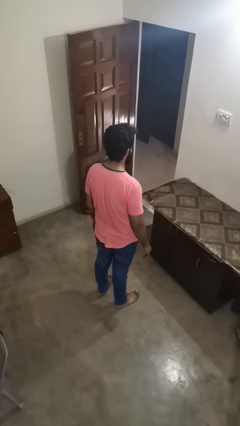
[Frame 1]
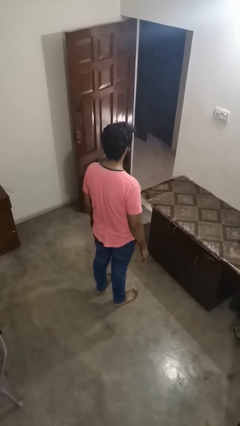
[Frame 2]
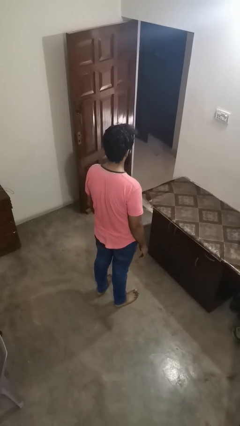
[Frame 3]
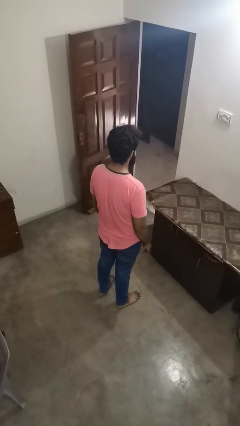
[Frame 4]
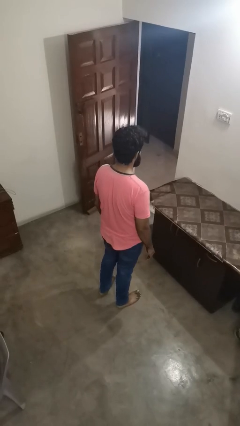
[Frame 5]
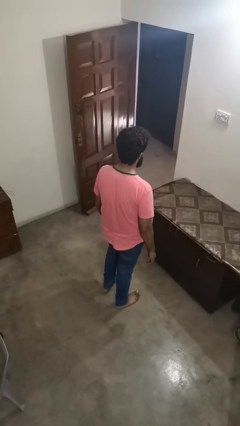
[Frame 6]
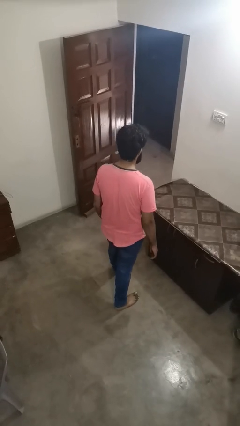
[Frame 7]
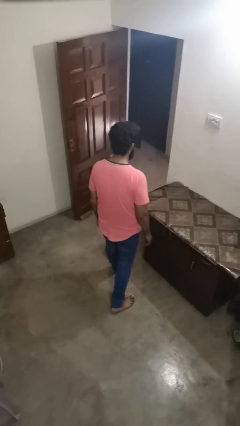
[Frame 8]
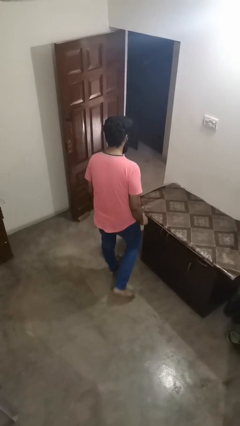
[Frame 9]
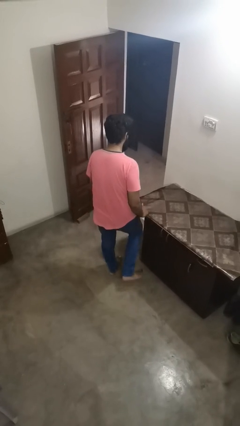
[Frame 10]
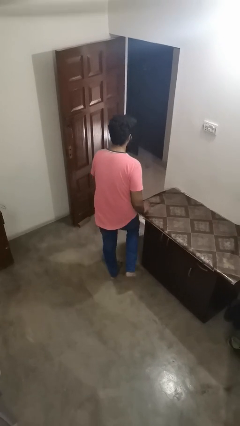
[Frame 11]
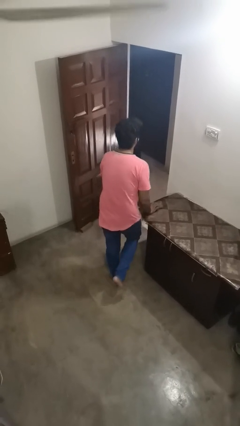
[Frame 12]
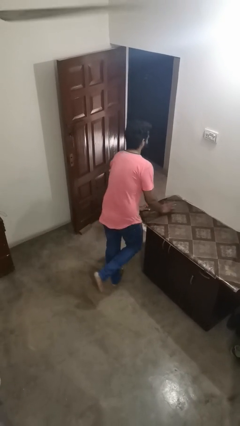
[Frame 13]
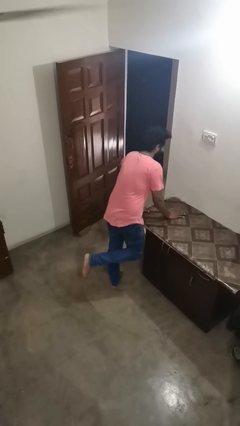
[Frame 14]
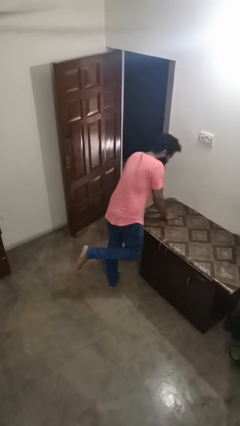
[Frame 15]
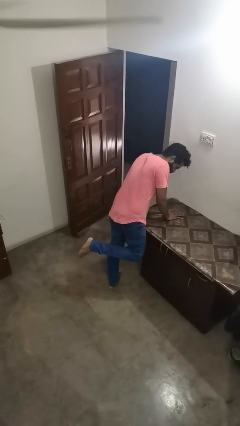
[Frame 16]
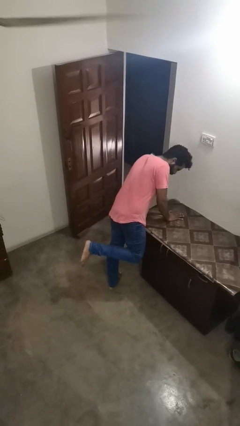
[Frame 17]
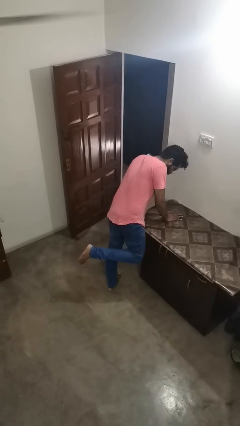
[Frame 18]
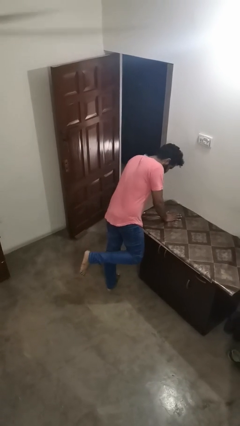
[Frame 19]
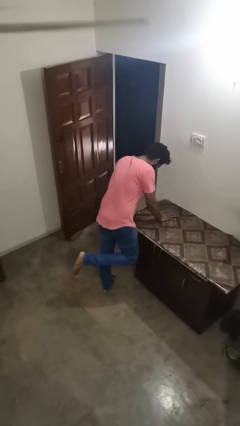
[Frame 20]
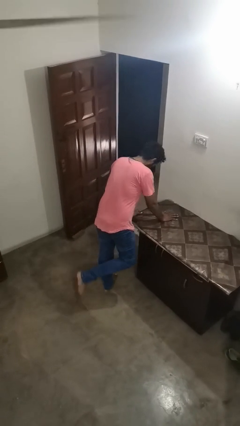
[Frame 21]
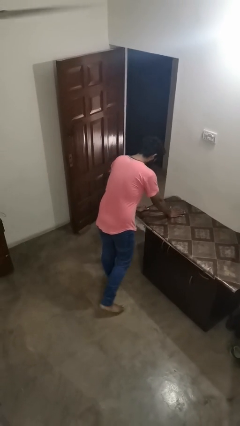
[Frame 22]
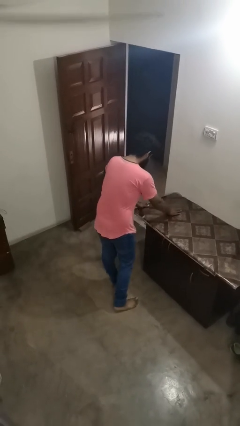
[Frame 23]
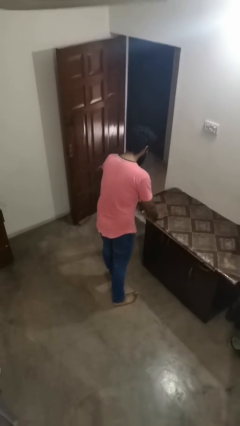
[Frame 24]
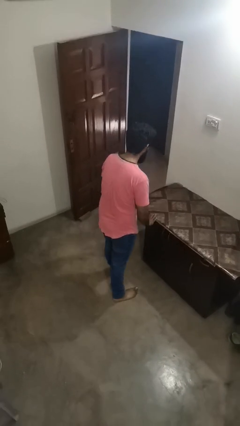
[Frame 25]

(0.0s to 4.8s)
person bumps into table

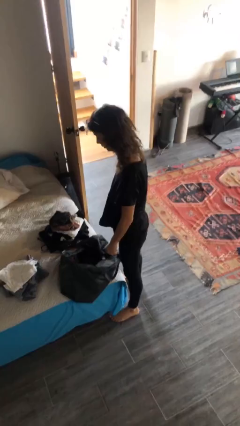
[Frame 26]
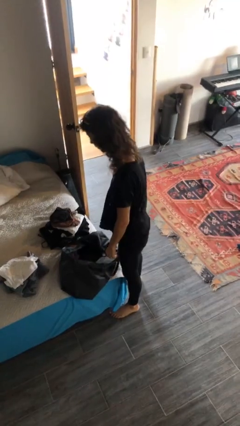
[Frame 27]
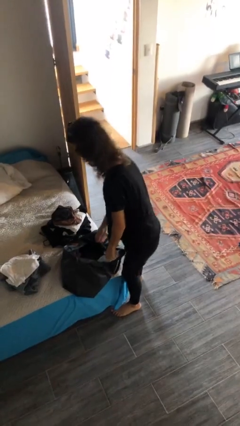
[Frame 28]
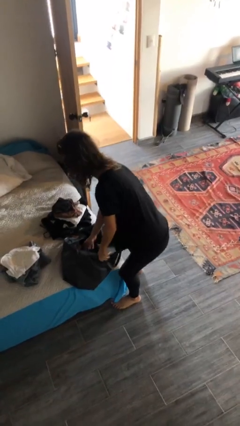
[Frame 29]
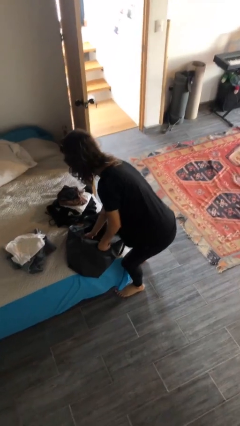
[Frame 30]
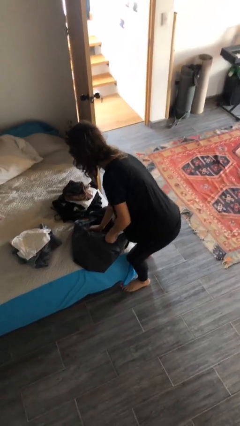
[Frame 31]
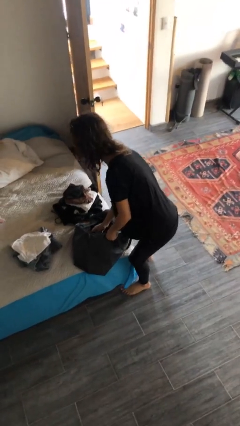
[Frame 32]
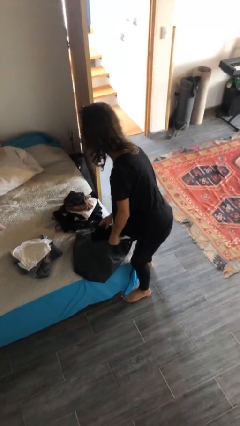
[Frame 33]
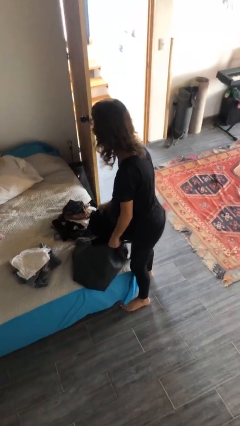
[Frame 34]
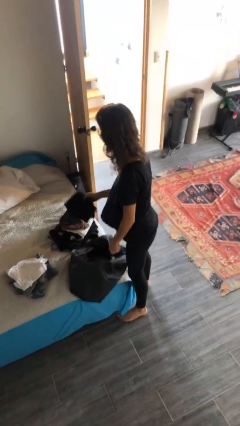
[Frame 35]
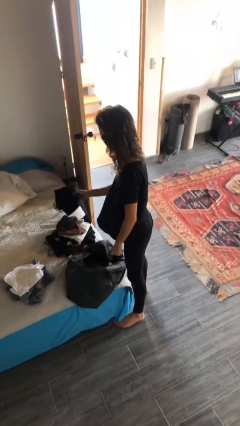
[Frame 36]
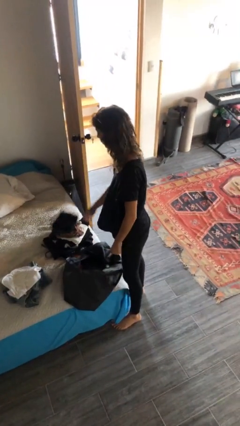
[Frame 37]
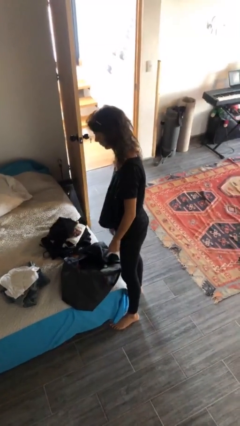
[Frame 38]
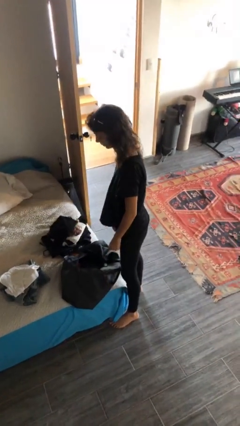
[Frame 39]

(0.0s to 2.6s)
person unloads clothes from suitcase

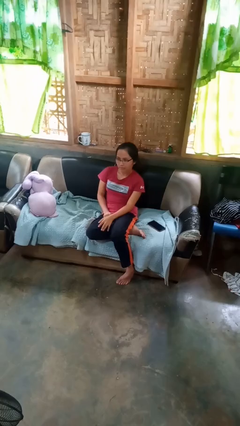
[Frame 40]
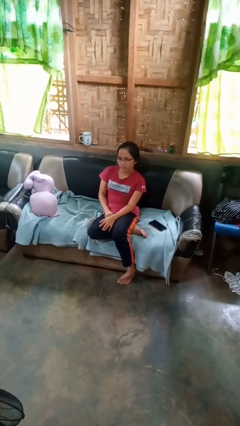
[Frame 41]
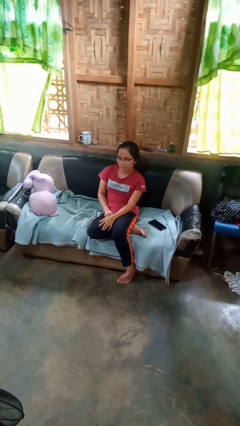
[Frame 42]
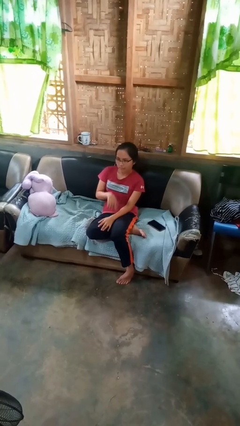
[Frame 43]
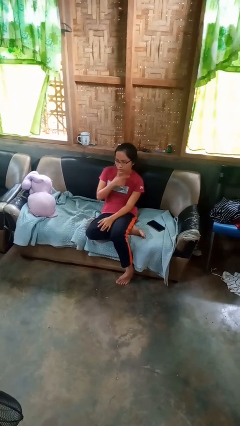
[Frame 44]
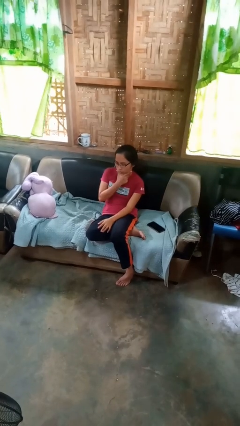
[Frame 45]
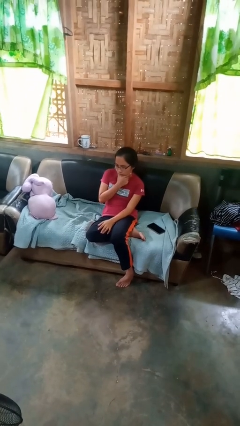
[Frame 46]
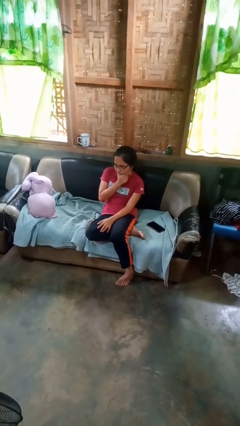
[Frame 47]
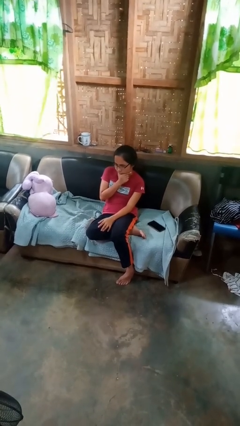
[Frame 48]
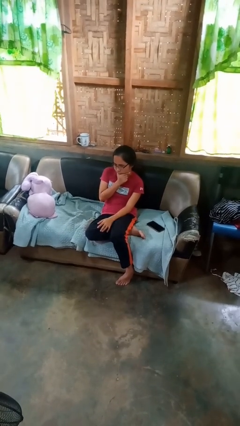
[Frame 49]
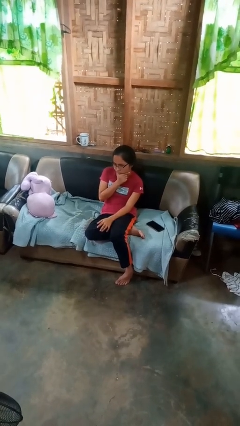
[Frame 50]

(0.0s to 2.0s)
person strokes chin

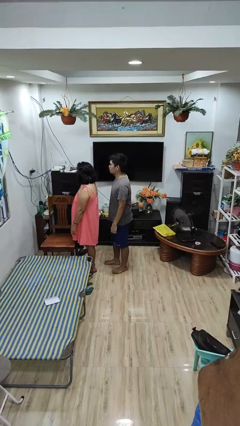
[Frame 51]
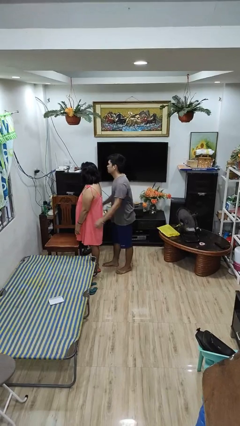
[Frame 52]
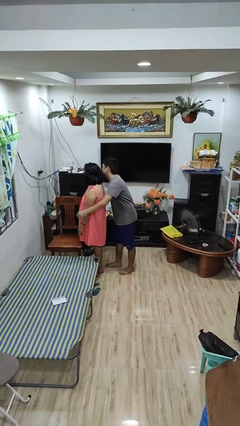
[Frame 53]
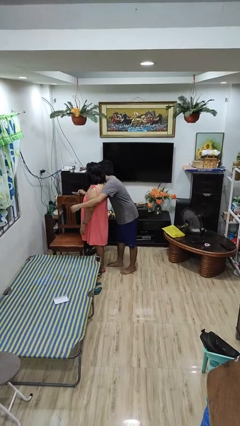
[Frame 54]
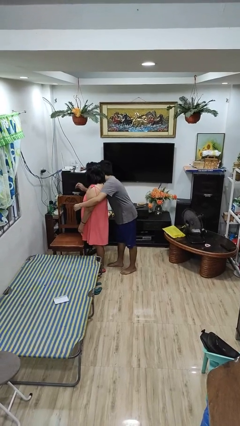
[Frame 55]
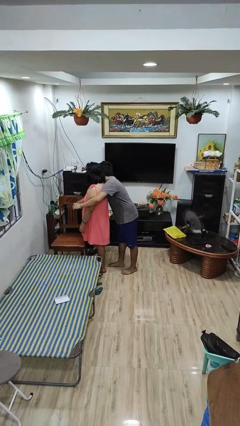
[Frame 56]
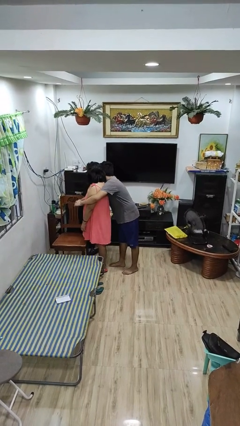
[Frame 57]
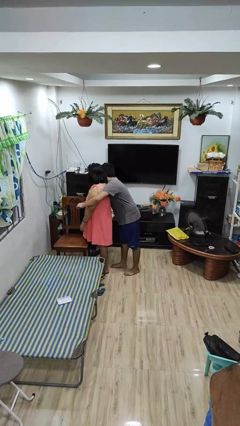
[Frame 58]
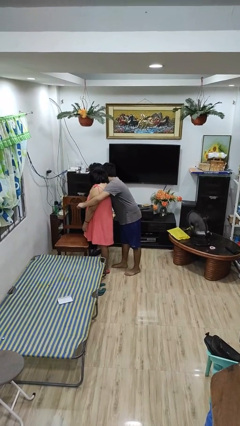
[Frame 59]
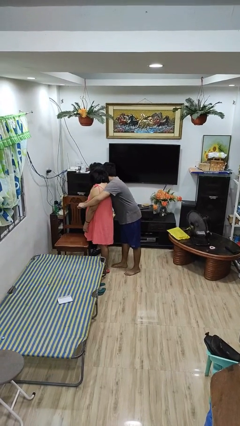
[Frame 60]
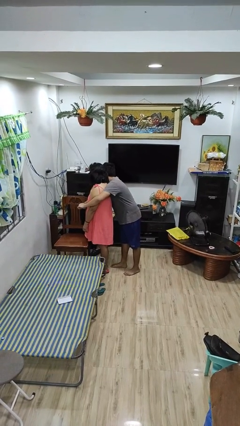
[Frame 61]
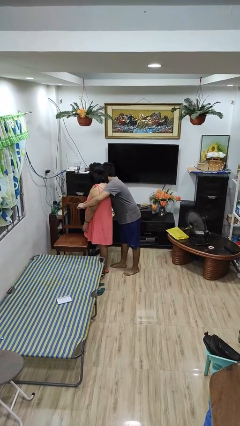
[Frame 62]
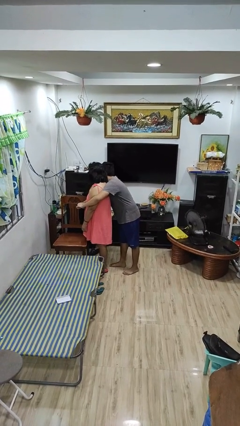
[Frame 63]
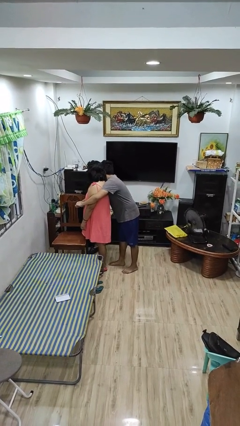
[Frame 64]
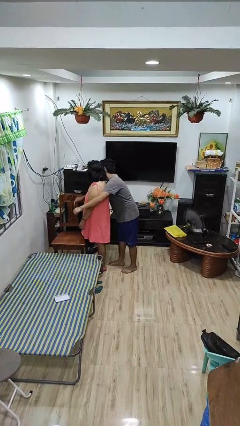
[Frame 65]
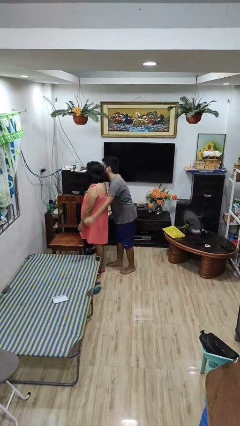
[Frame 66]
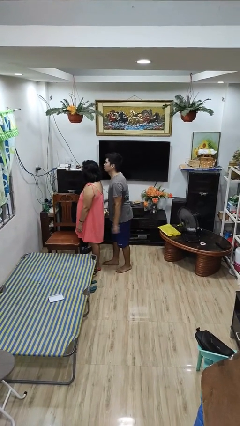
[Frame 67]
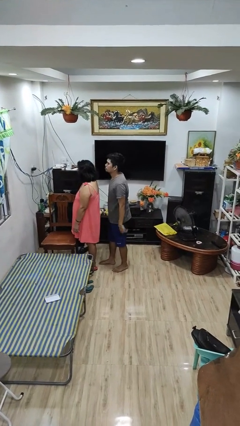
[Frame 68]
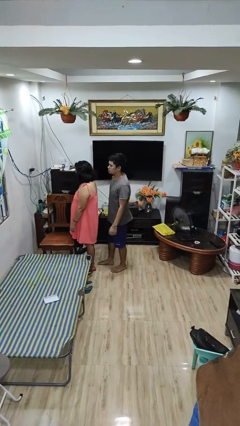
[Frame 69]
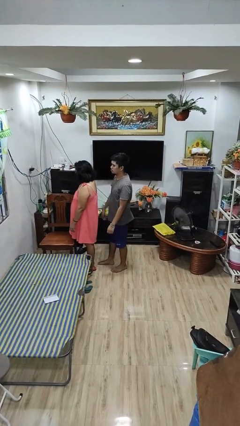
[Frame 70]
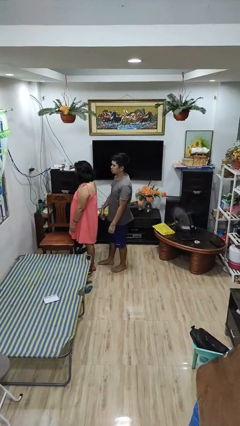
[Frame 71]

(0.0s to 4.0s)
person hugs person from behind

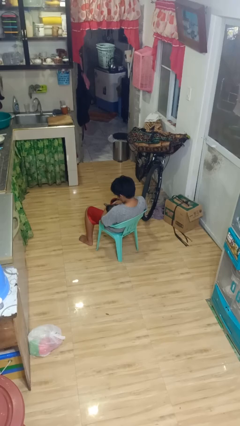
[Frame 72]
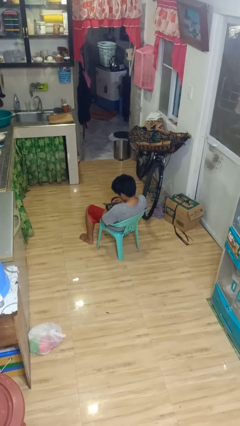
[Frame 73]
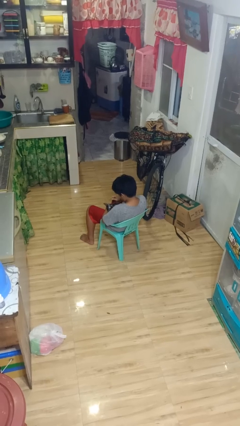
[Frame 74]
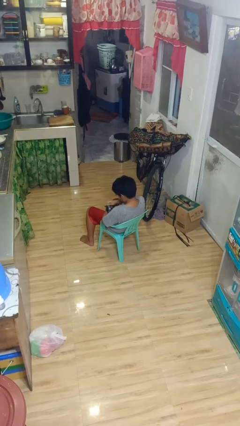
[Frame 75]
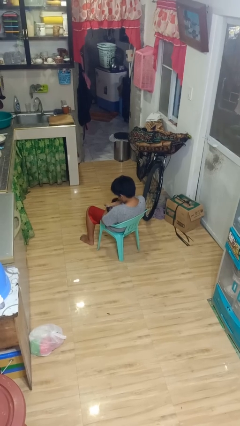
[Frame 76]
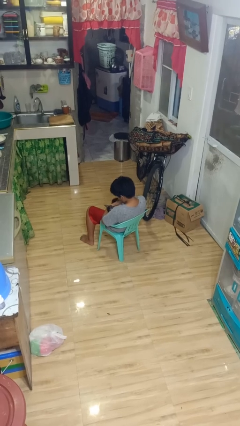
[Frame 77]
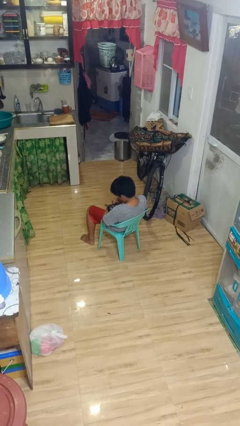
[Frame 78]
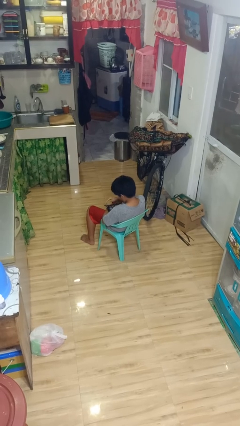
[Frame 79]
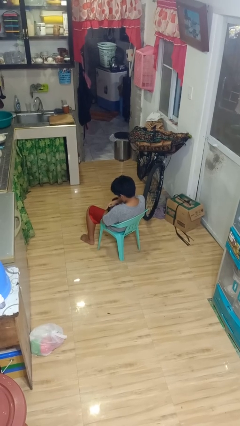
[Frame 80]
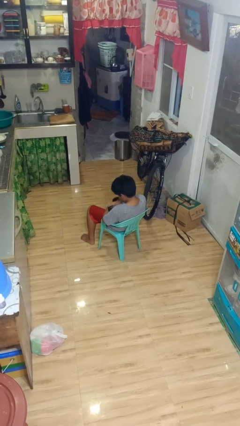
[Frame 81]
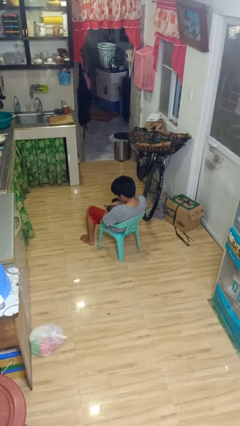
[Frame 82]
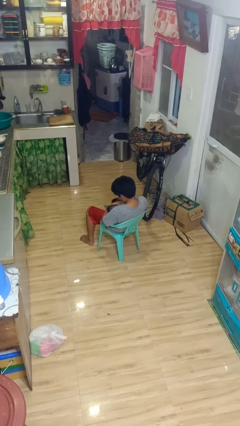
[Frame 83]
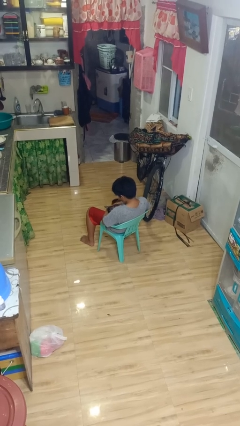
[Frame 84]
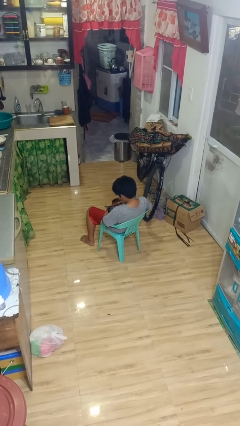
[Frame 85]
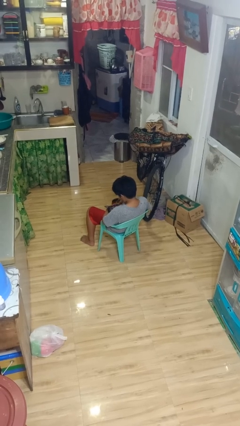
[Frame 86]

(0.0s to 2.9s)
person pets cat

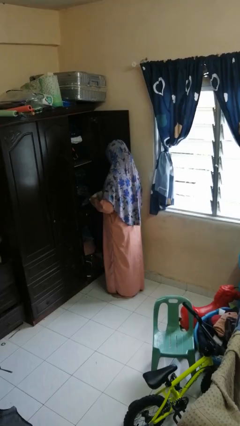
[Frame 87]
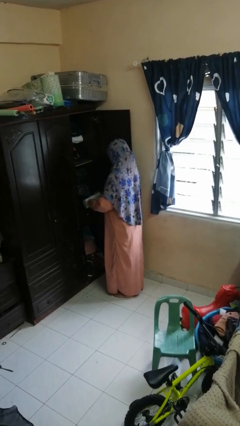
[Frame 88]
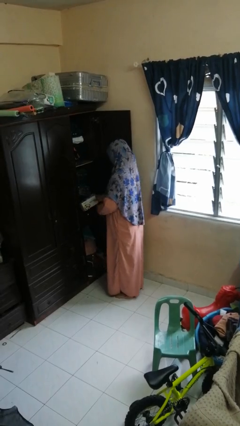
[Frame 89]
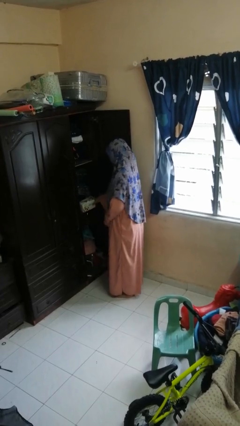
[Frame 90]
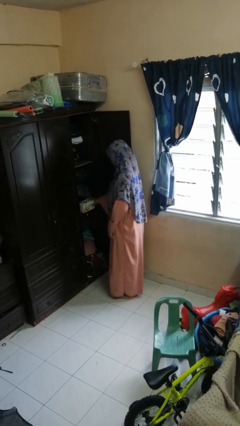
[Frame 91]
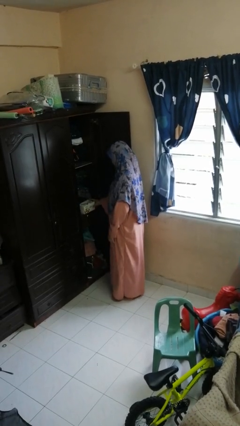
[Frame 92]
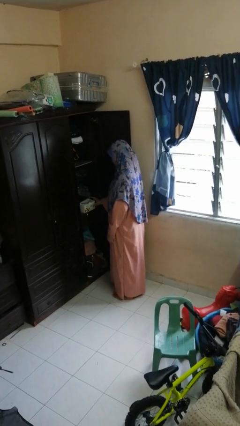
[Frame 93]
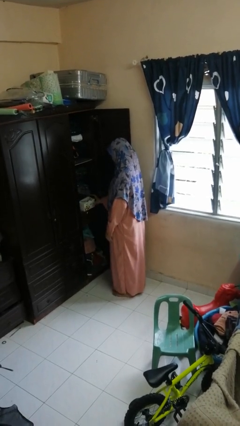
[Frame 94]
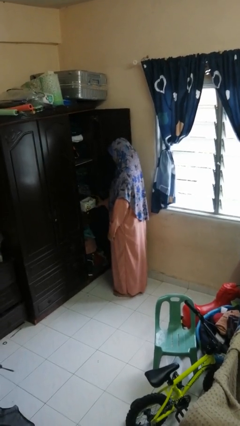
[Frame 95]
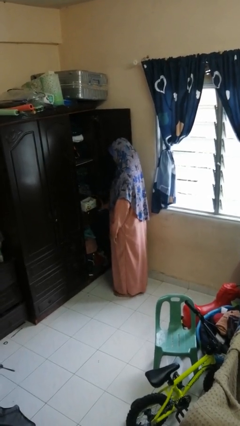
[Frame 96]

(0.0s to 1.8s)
person puts down object into cabinet
